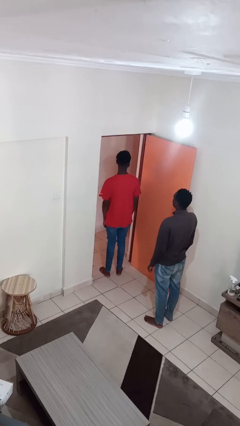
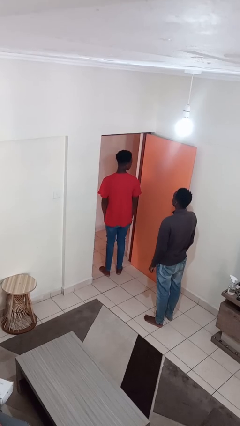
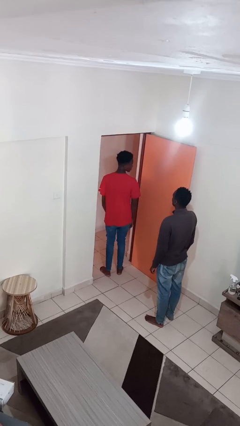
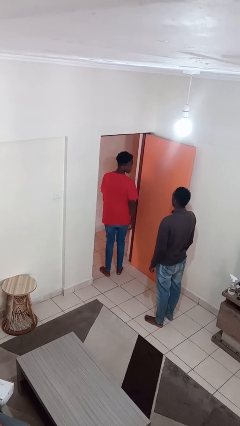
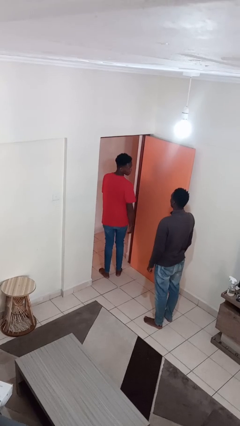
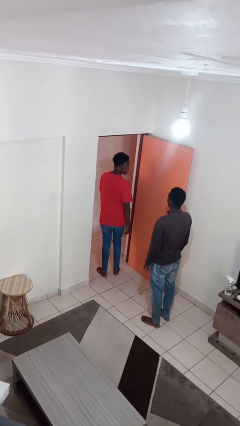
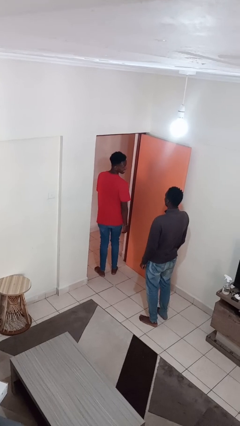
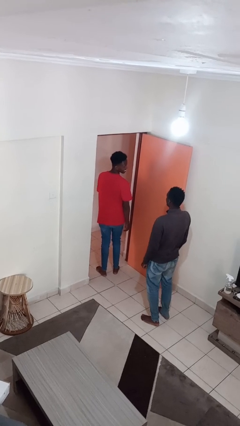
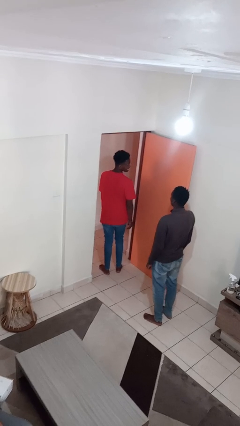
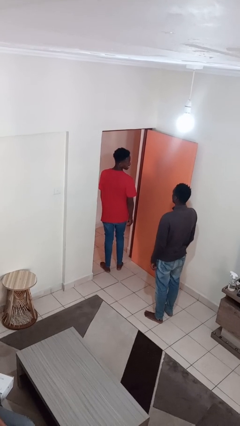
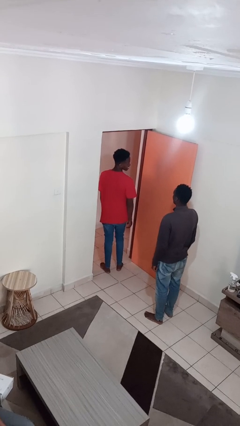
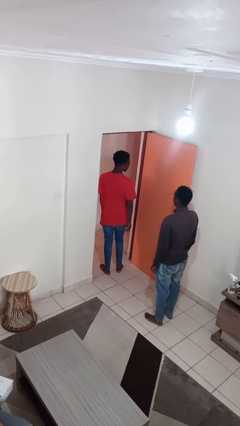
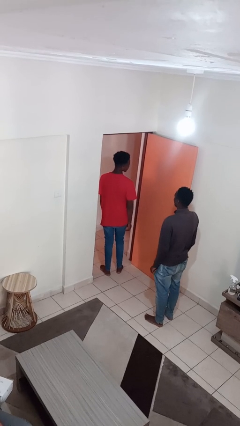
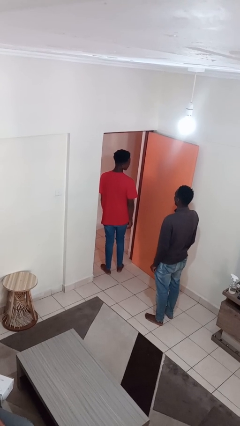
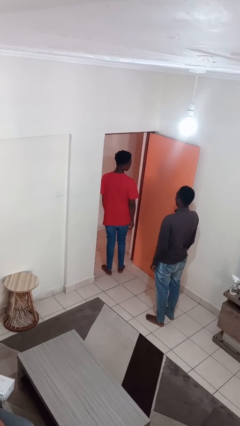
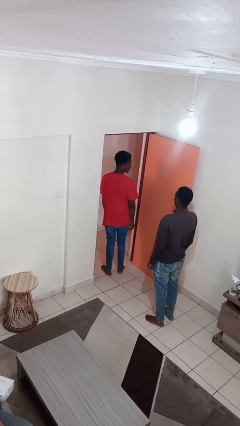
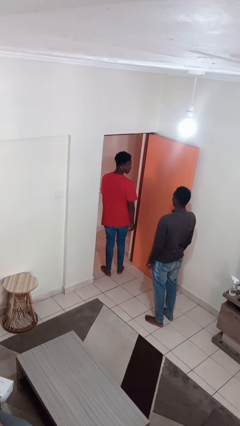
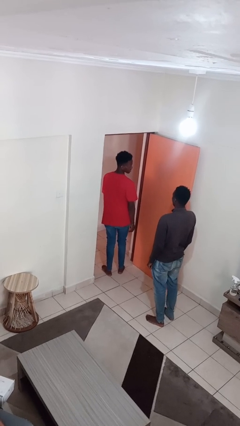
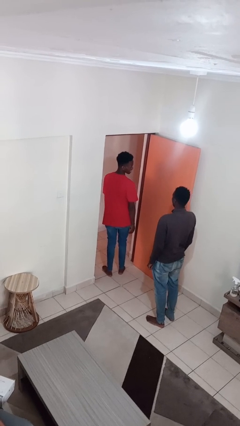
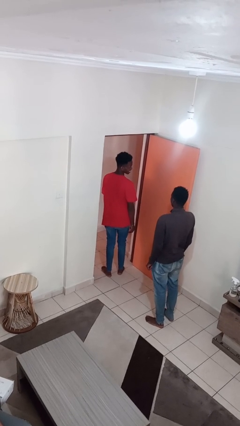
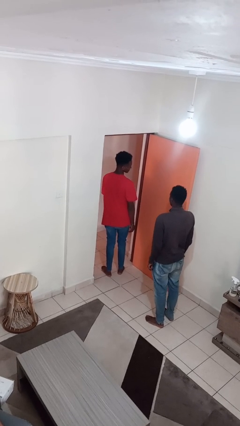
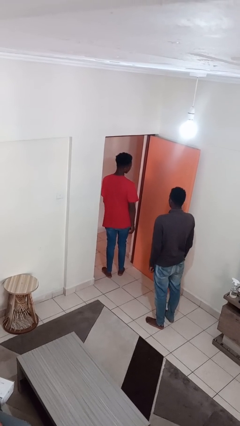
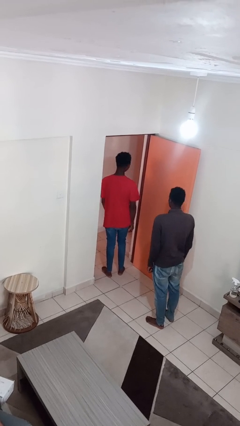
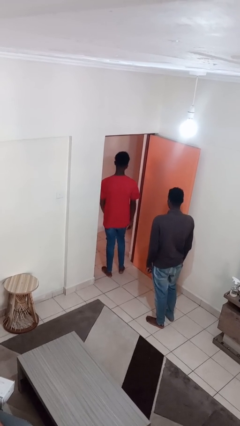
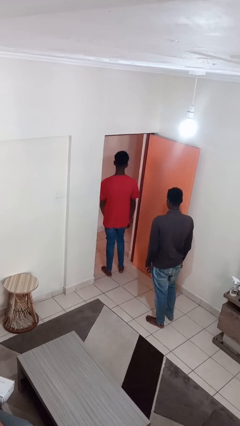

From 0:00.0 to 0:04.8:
person looks over shoulder

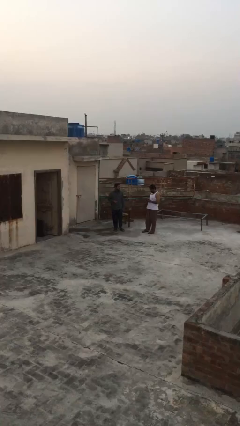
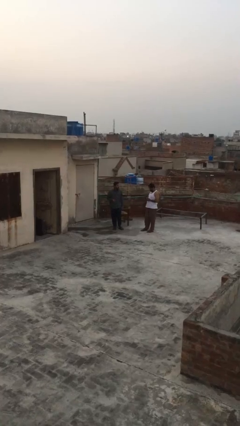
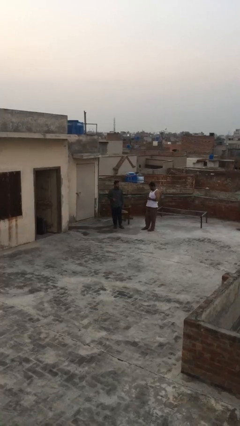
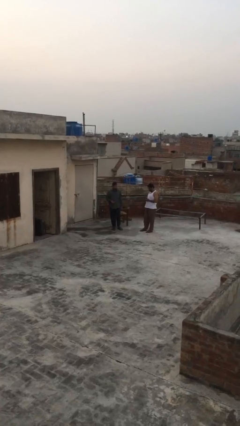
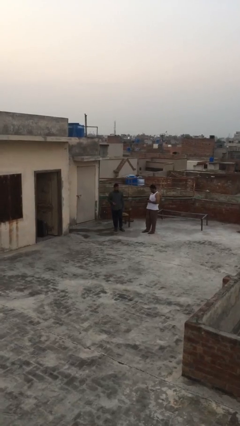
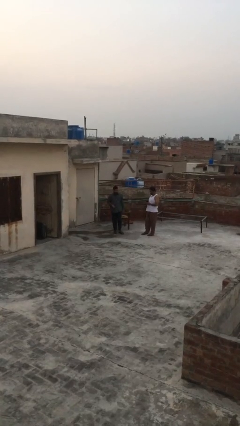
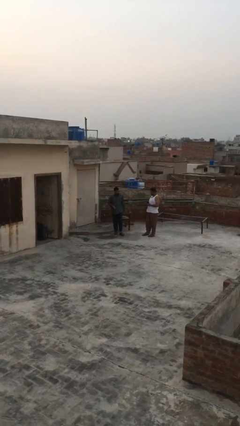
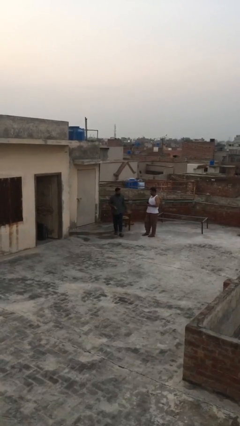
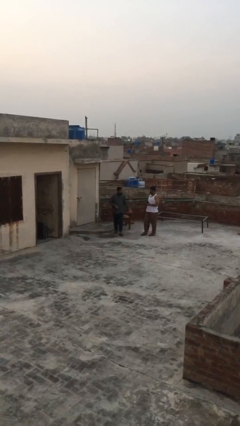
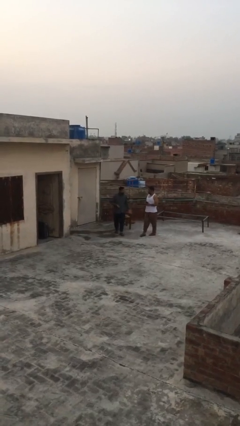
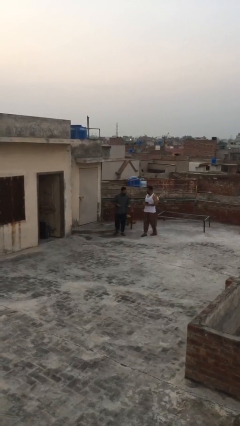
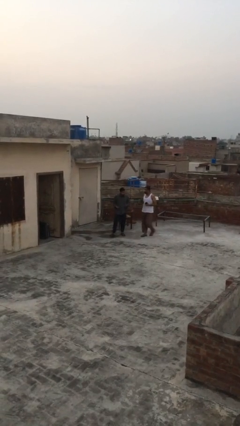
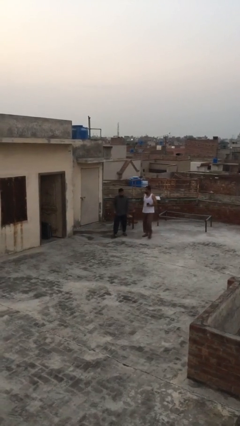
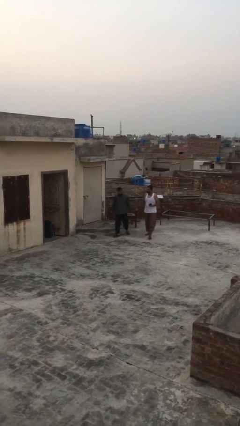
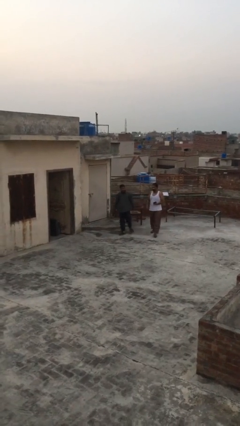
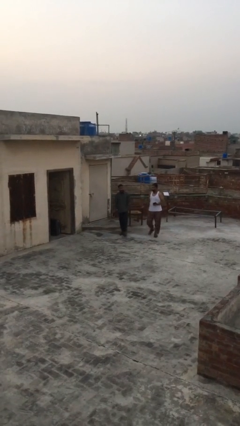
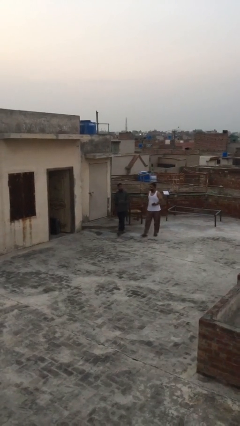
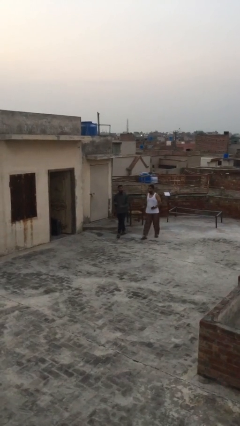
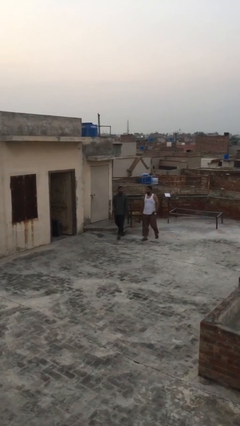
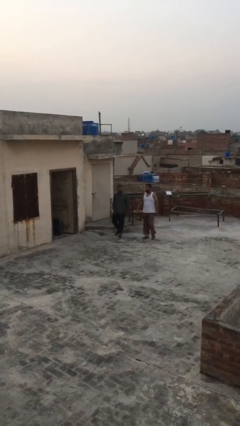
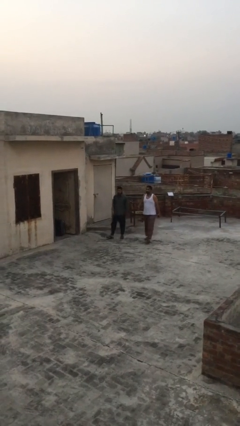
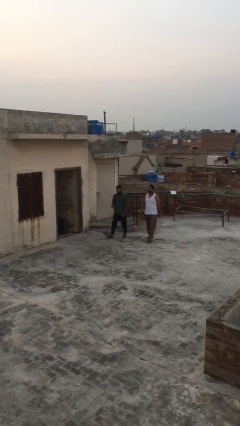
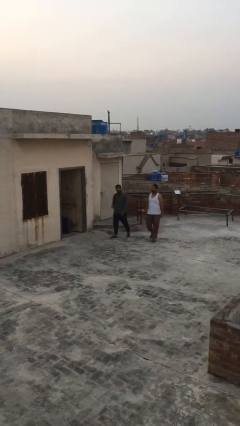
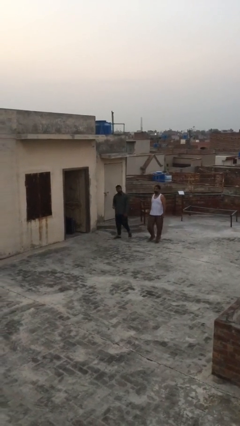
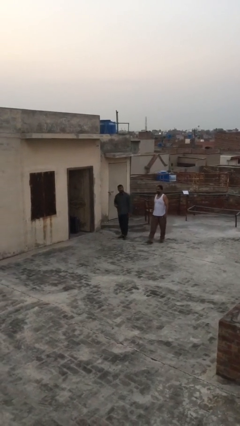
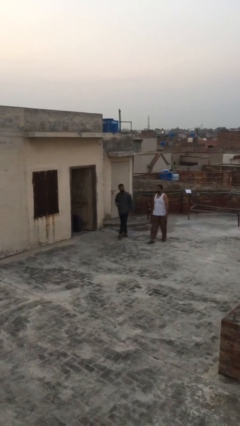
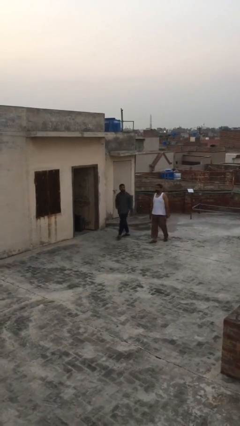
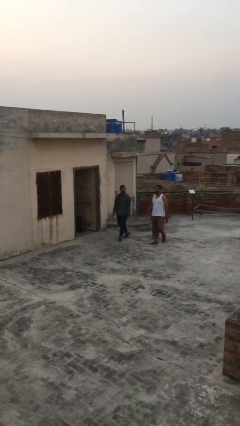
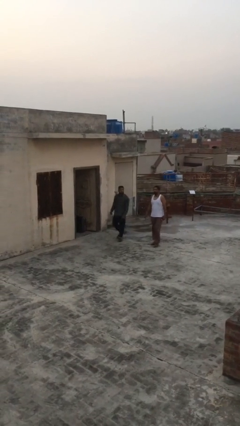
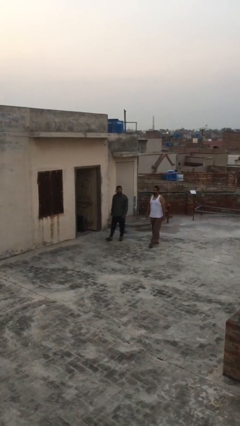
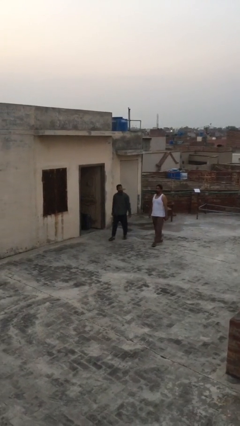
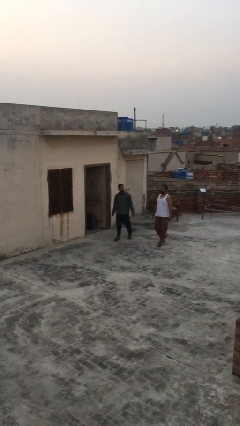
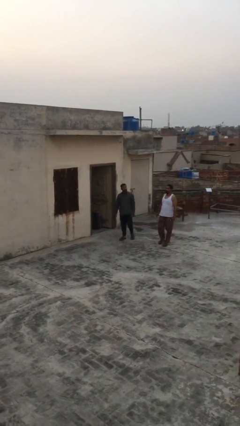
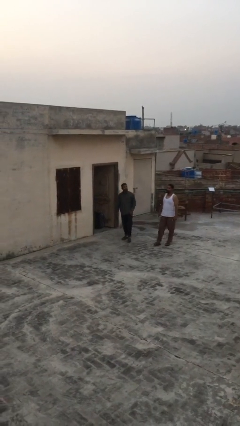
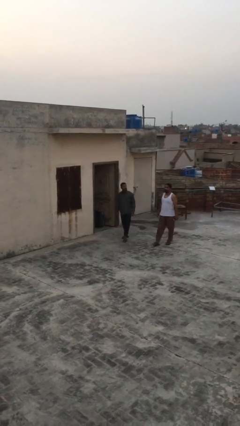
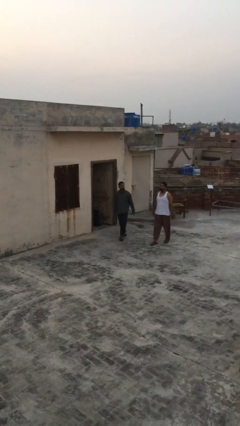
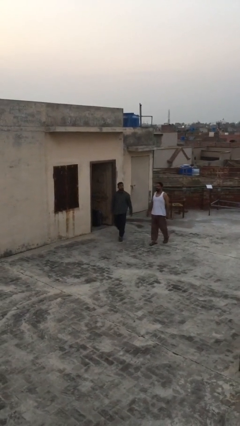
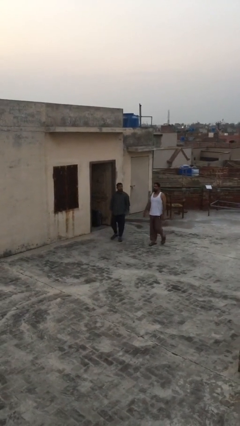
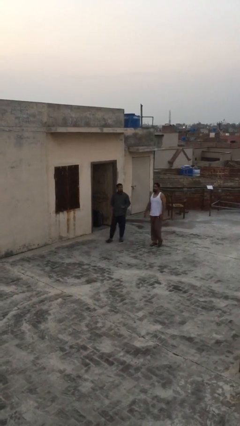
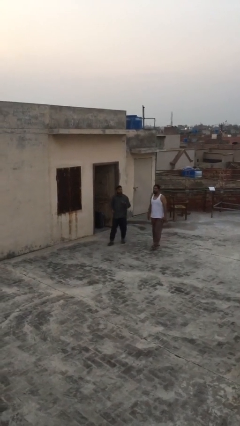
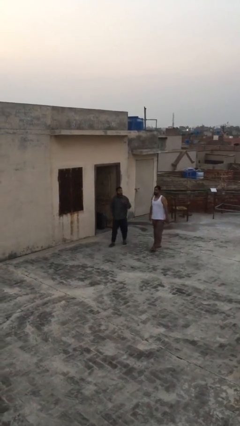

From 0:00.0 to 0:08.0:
person talks to person

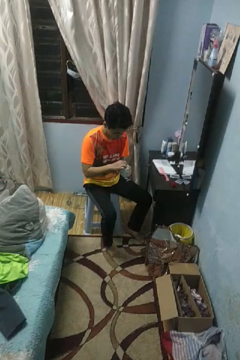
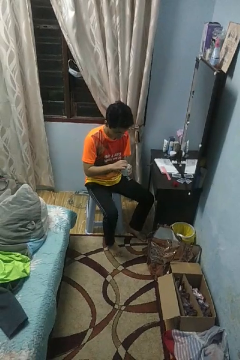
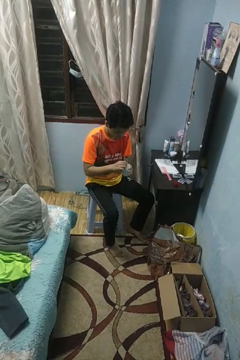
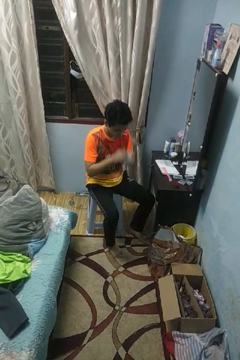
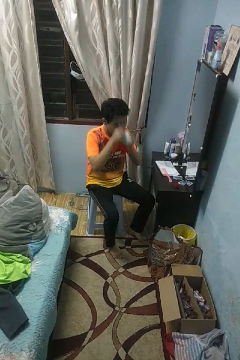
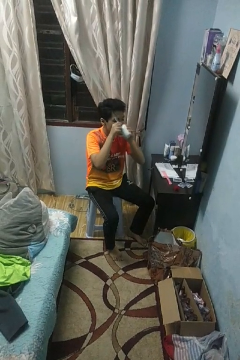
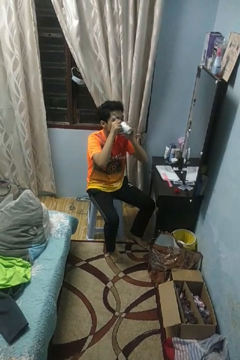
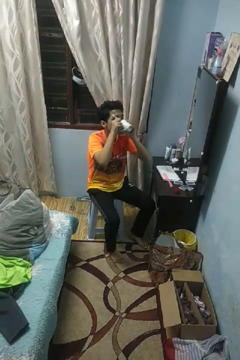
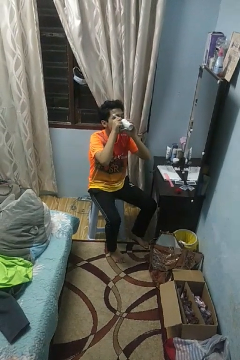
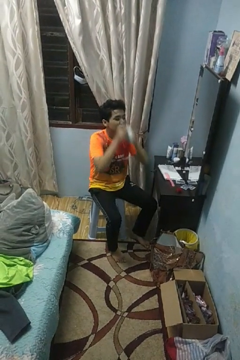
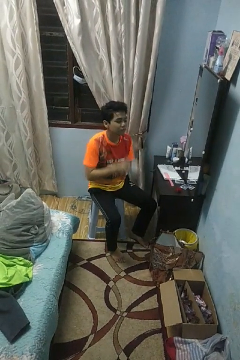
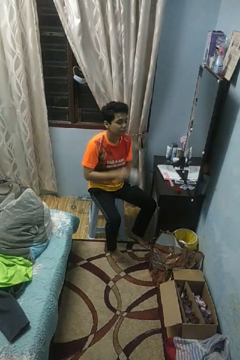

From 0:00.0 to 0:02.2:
person drinks from mug

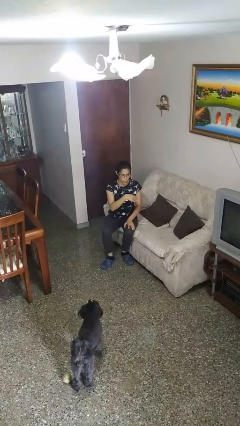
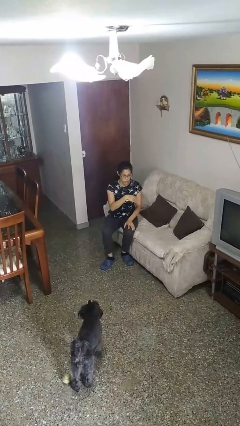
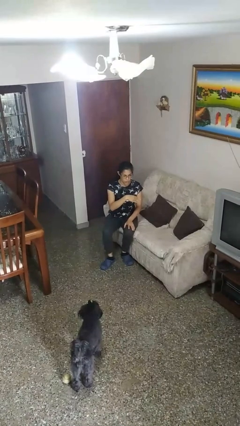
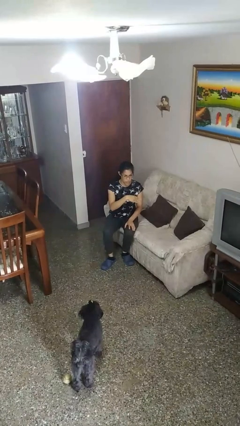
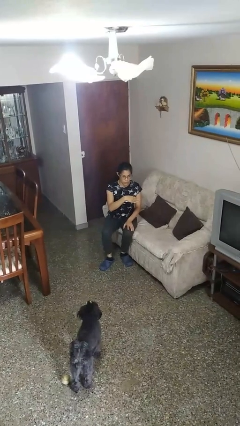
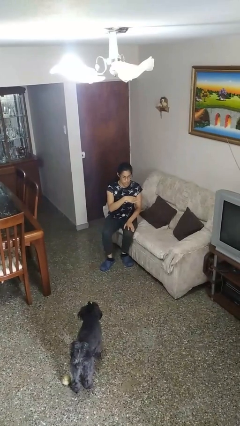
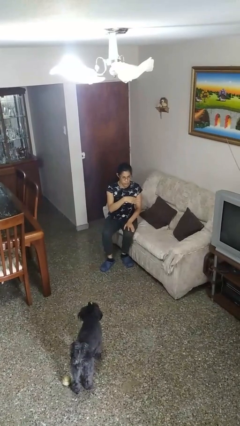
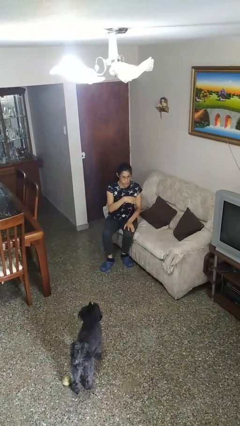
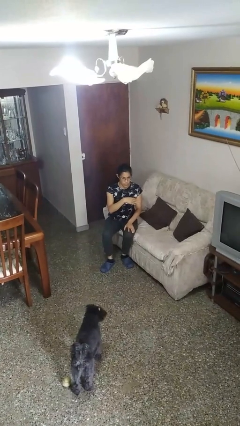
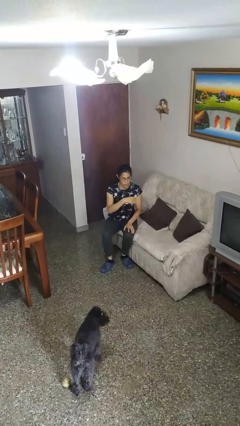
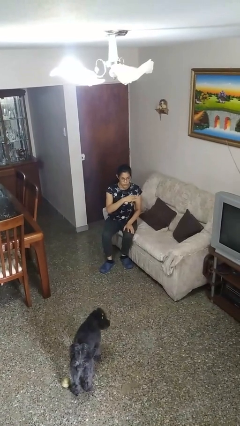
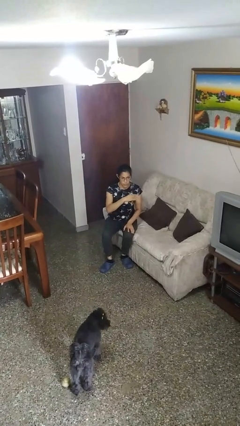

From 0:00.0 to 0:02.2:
person gestures swipe left

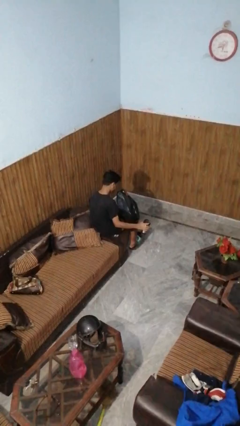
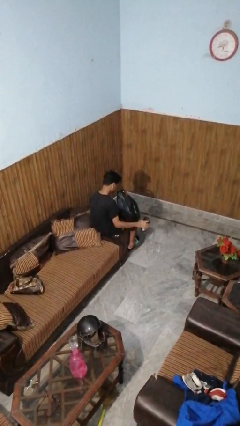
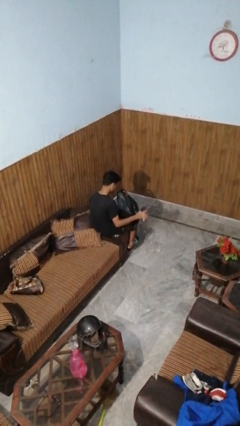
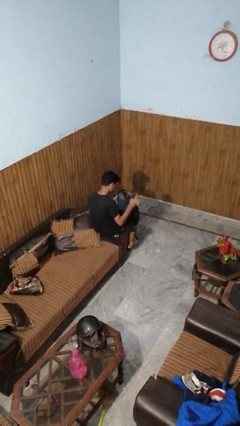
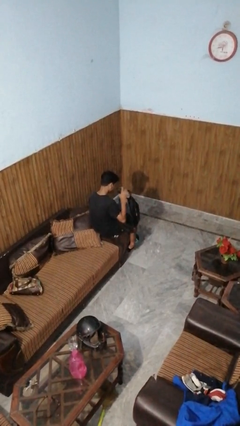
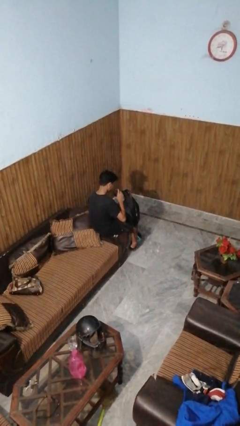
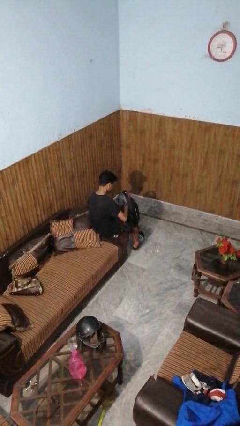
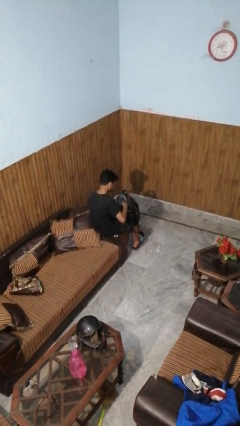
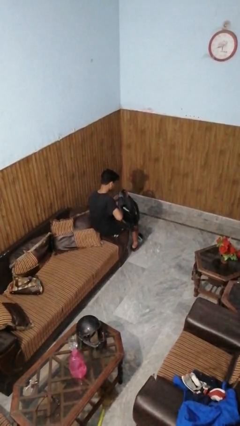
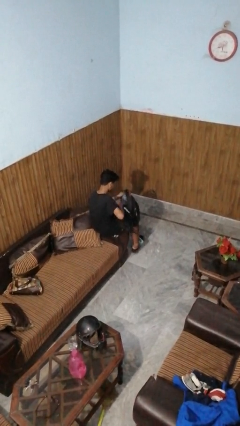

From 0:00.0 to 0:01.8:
person puts object into backpack
